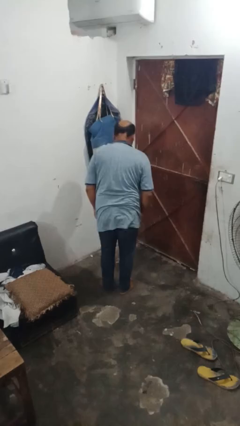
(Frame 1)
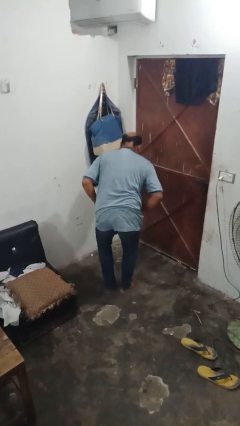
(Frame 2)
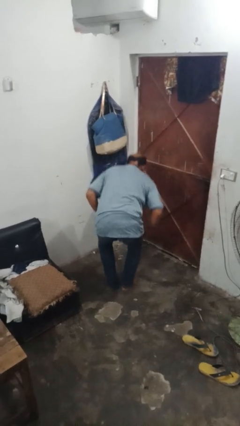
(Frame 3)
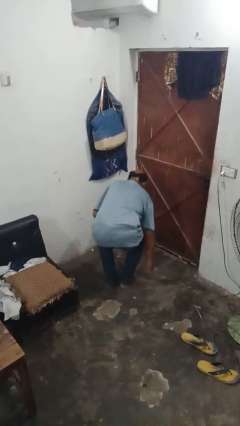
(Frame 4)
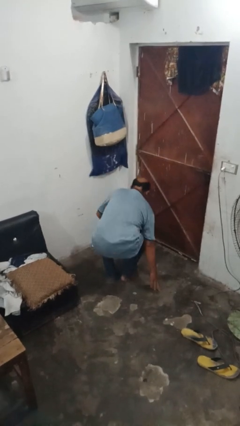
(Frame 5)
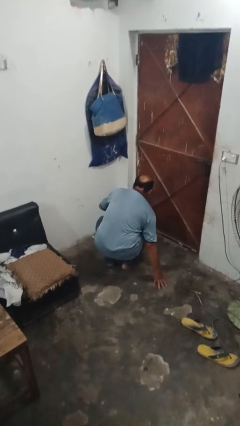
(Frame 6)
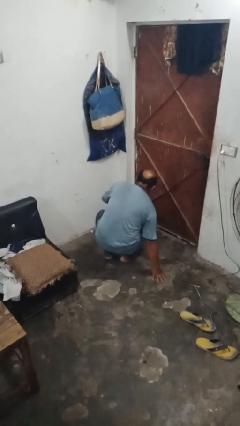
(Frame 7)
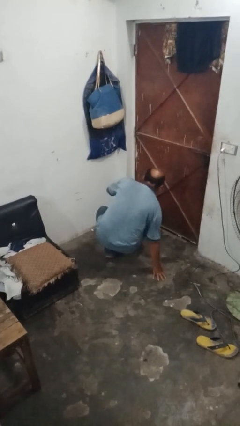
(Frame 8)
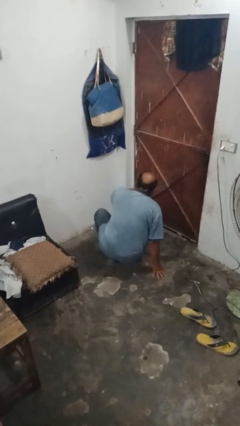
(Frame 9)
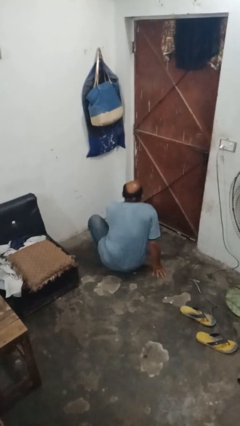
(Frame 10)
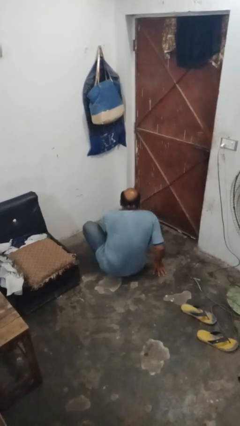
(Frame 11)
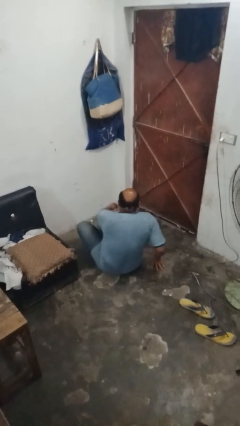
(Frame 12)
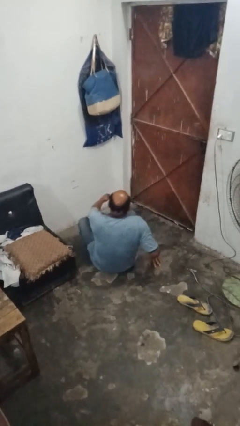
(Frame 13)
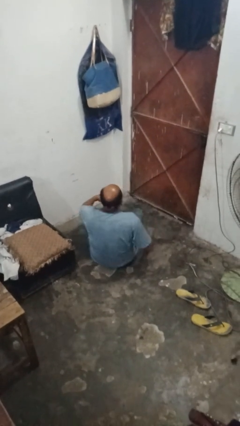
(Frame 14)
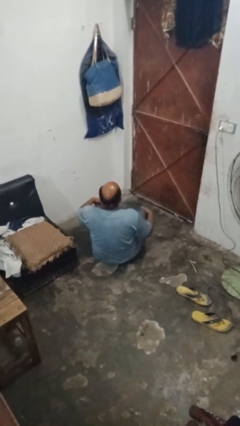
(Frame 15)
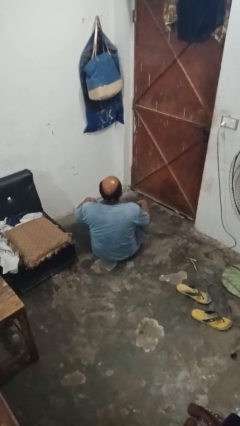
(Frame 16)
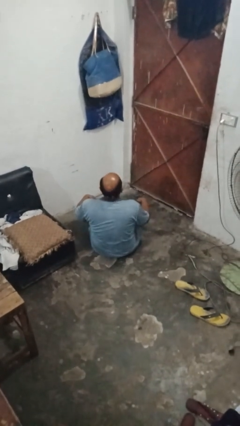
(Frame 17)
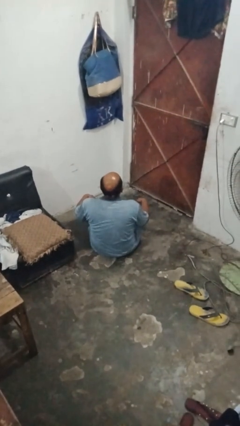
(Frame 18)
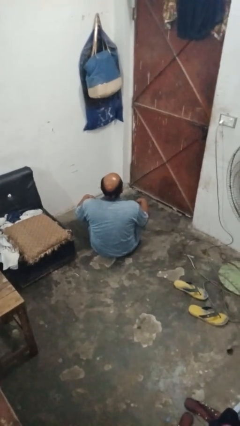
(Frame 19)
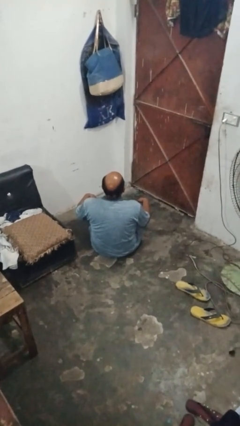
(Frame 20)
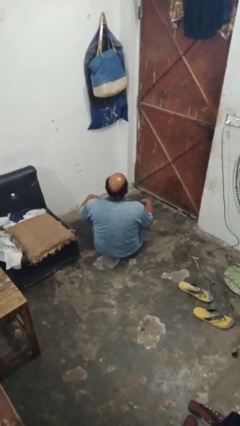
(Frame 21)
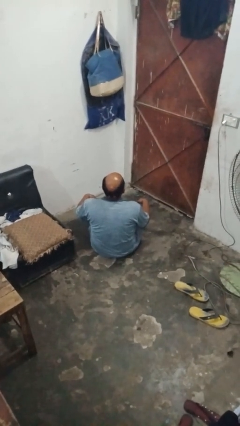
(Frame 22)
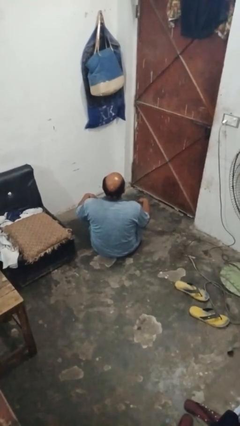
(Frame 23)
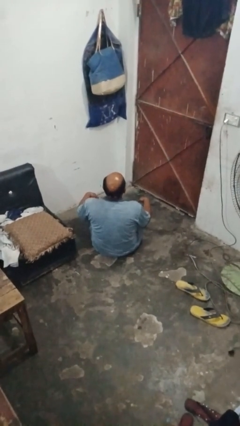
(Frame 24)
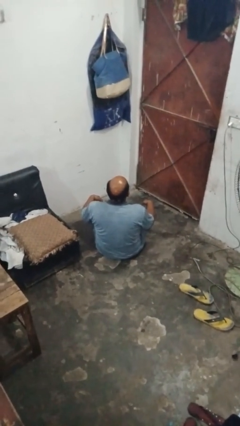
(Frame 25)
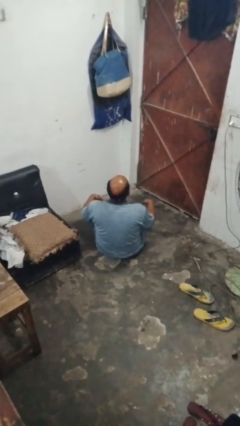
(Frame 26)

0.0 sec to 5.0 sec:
person sits crisscross

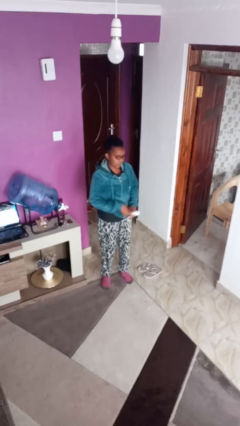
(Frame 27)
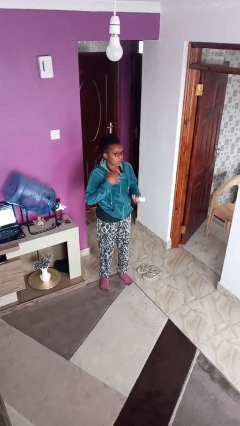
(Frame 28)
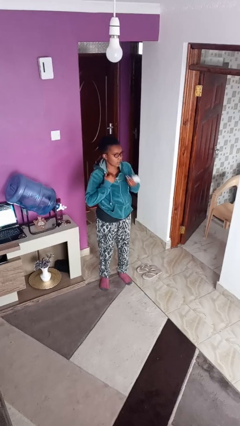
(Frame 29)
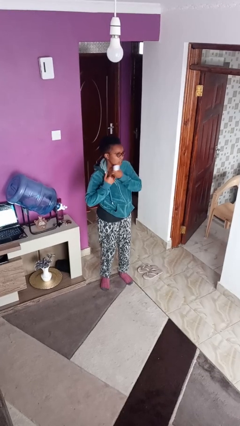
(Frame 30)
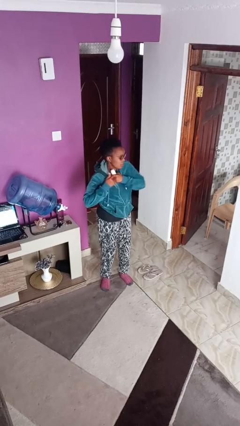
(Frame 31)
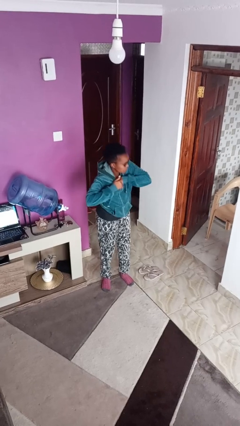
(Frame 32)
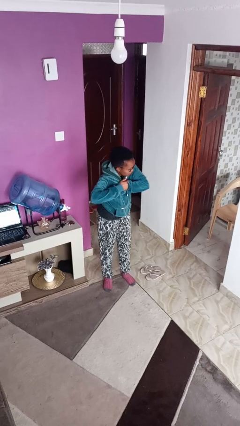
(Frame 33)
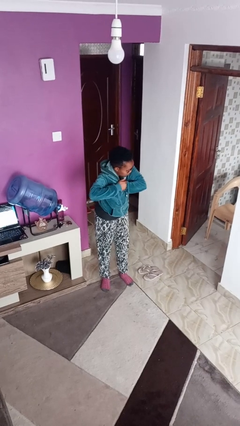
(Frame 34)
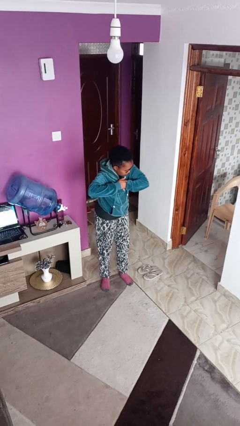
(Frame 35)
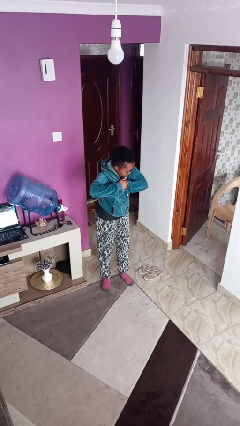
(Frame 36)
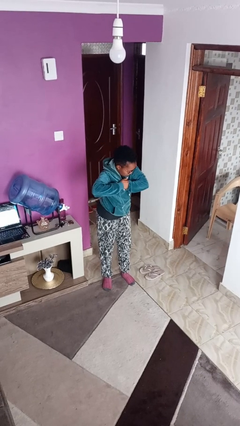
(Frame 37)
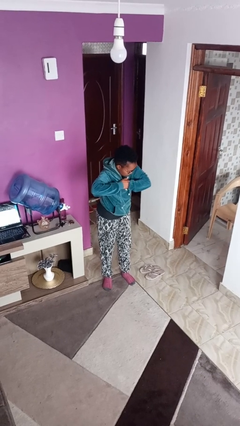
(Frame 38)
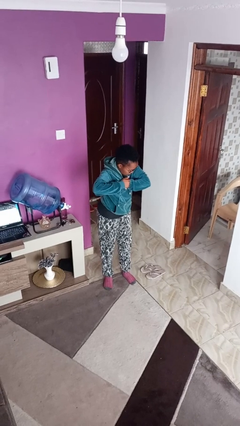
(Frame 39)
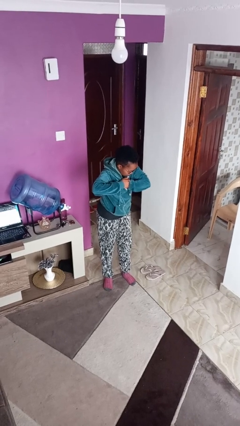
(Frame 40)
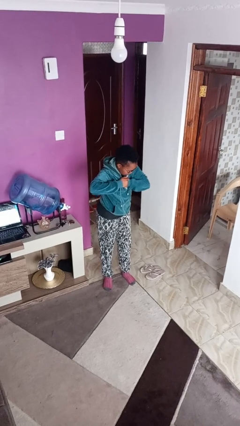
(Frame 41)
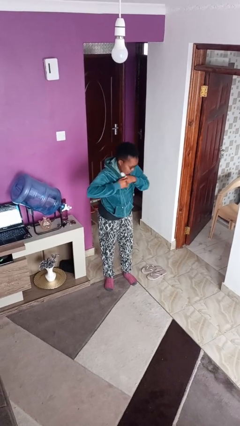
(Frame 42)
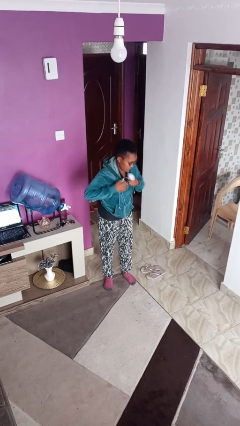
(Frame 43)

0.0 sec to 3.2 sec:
person applies deodorant

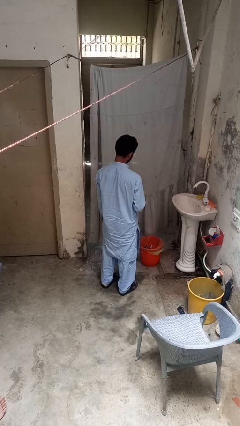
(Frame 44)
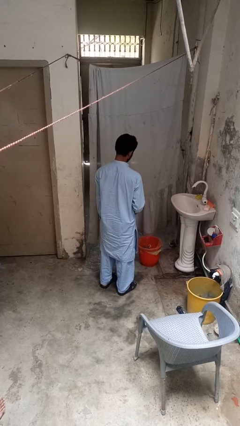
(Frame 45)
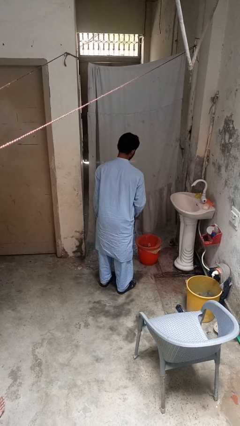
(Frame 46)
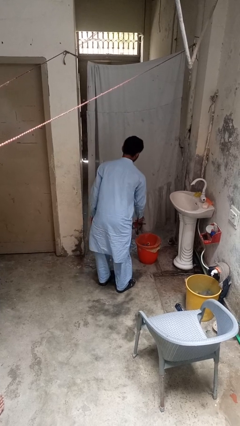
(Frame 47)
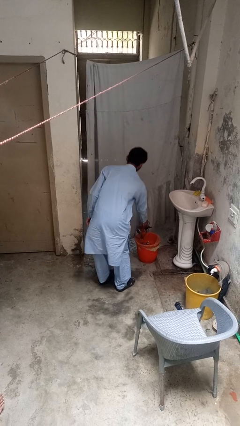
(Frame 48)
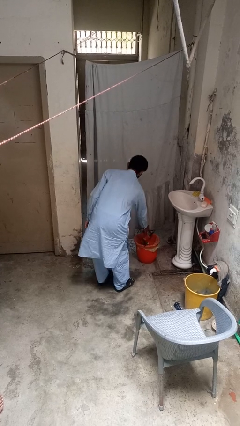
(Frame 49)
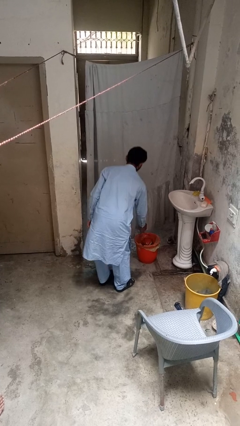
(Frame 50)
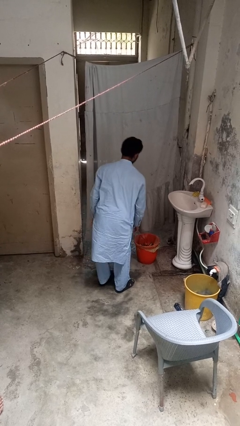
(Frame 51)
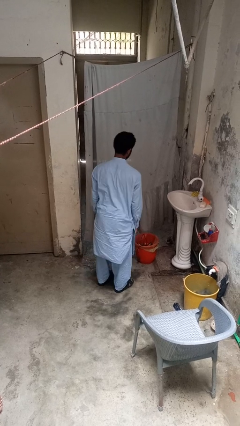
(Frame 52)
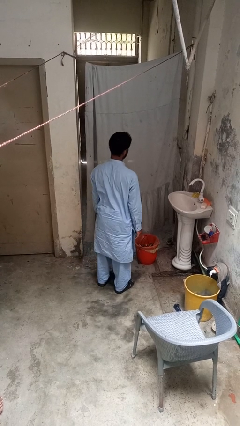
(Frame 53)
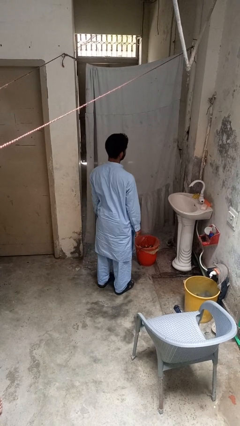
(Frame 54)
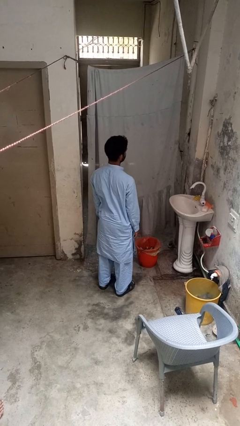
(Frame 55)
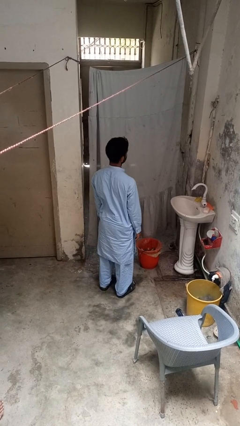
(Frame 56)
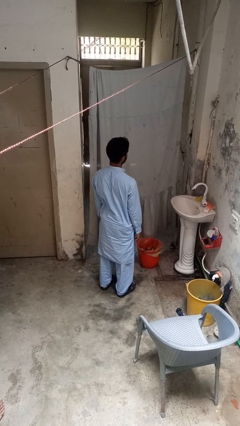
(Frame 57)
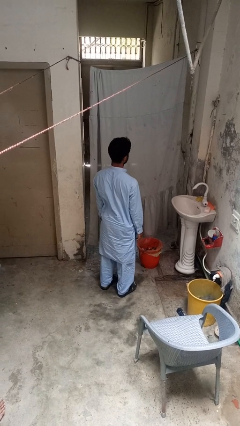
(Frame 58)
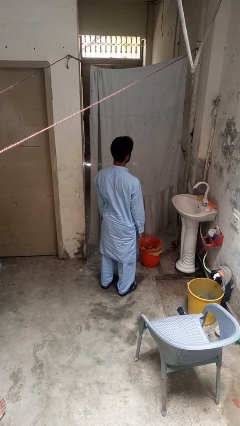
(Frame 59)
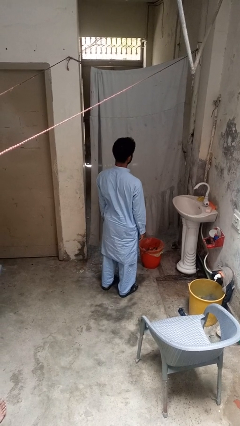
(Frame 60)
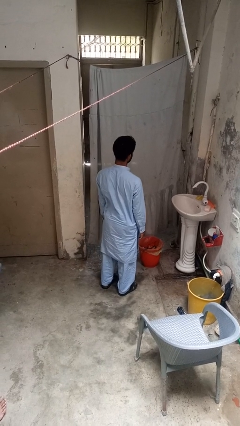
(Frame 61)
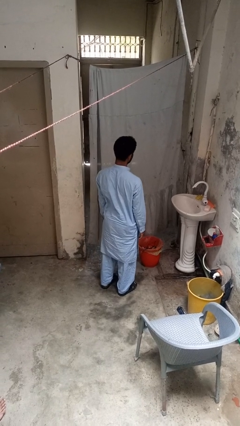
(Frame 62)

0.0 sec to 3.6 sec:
person discards trash

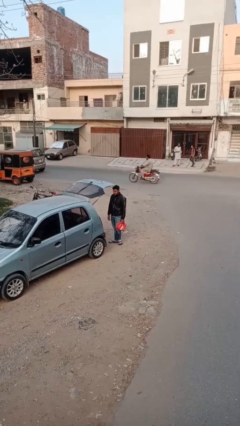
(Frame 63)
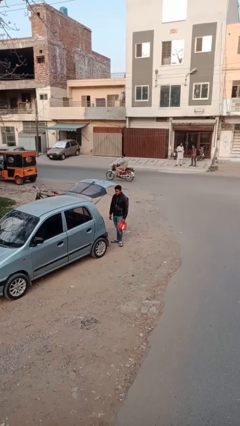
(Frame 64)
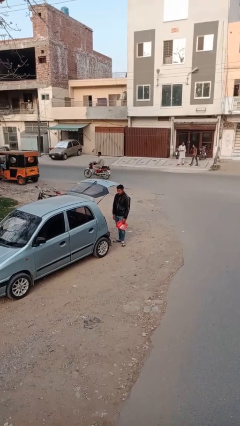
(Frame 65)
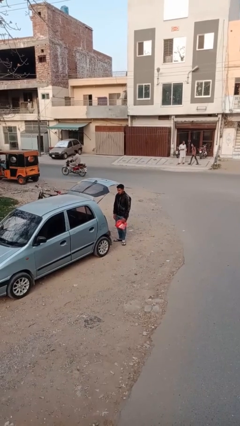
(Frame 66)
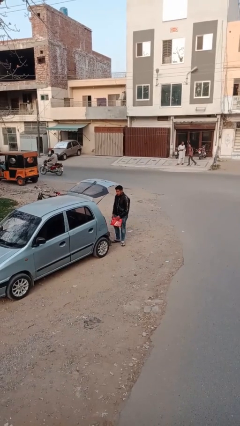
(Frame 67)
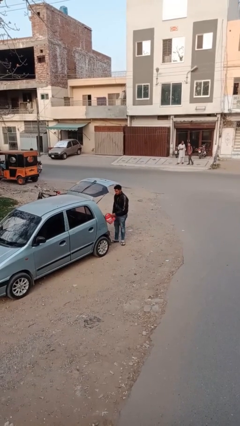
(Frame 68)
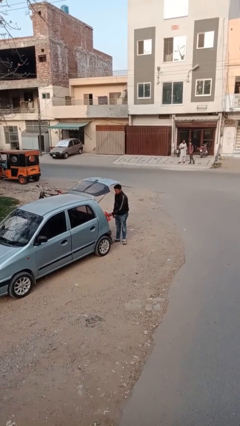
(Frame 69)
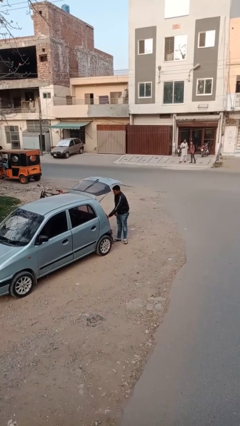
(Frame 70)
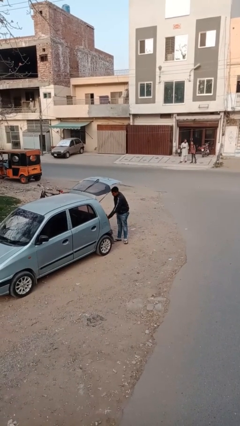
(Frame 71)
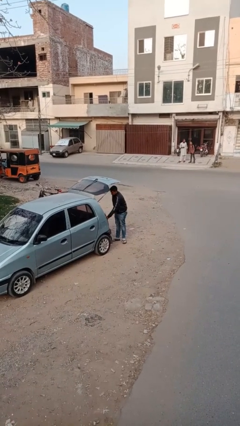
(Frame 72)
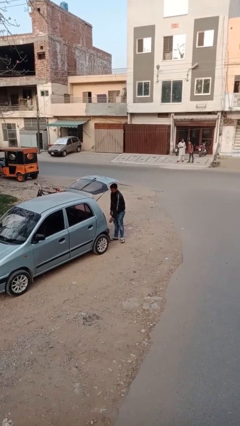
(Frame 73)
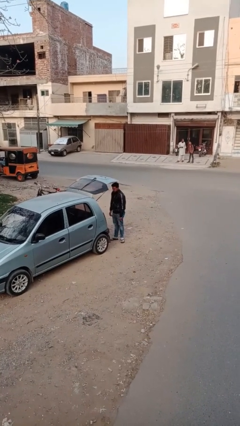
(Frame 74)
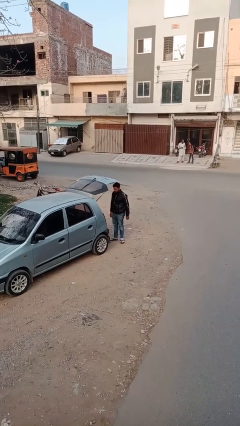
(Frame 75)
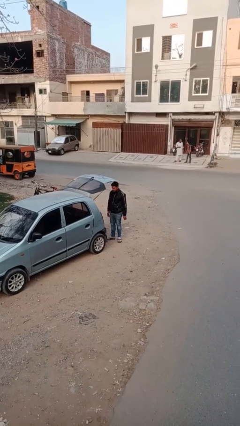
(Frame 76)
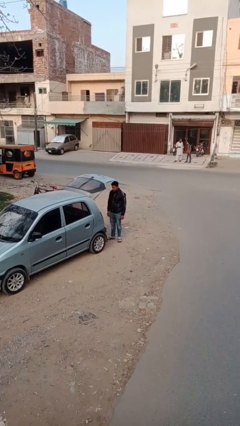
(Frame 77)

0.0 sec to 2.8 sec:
person loads car

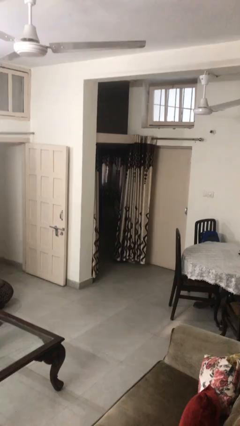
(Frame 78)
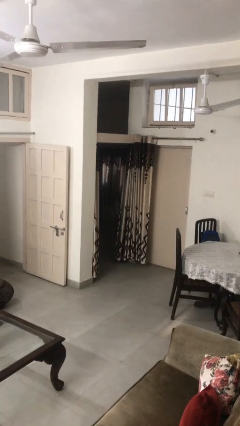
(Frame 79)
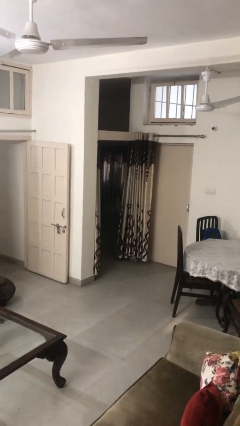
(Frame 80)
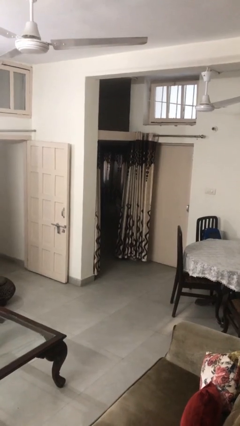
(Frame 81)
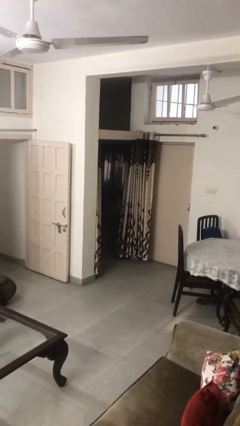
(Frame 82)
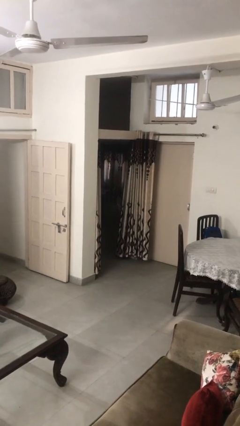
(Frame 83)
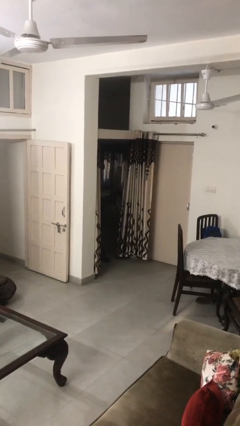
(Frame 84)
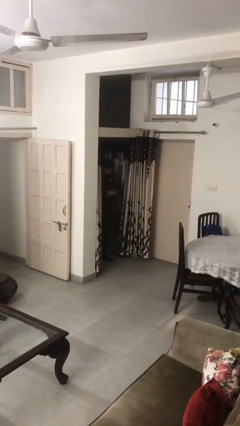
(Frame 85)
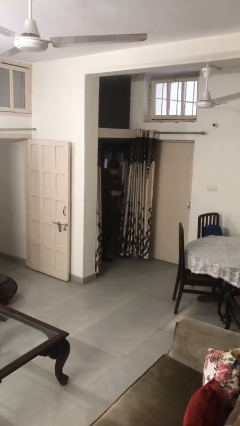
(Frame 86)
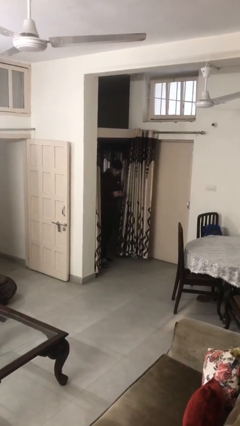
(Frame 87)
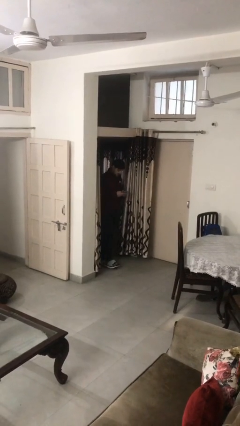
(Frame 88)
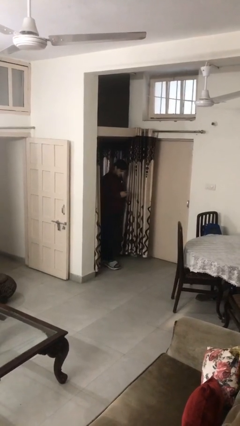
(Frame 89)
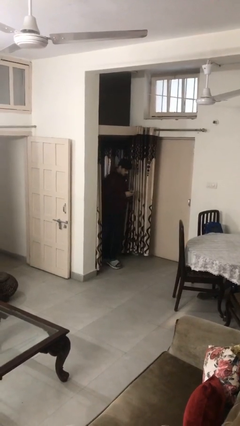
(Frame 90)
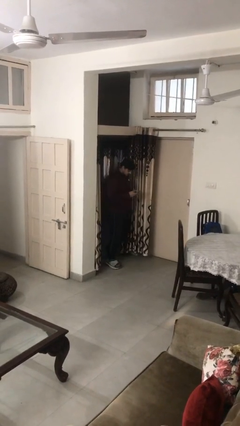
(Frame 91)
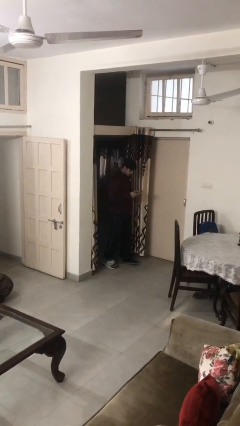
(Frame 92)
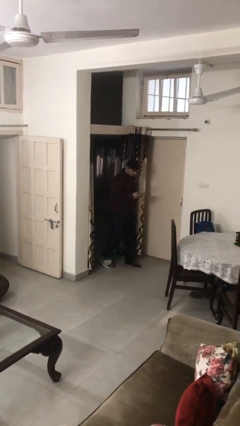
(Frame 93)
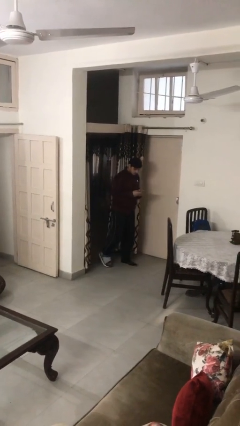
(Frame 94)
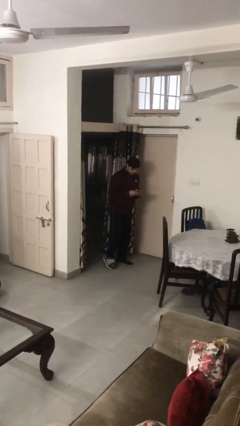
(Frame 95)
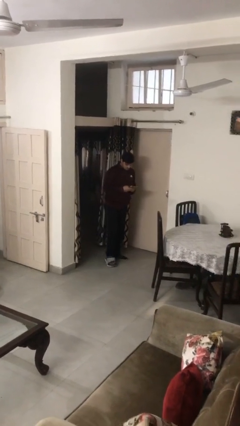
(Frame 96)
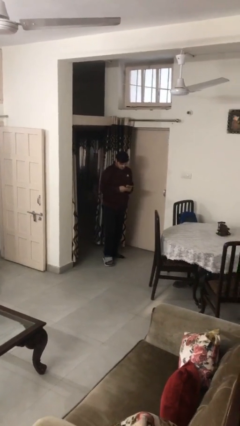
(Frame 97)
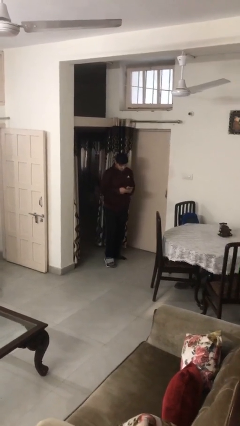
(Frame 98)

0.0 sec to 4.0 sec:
person enters scene through structure
